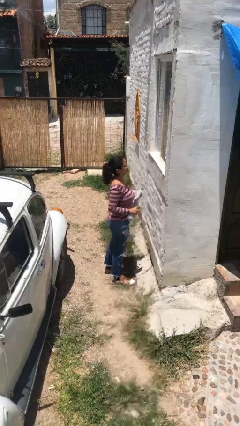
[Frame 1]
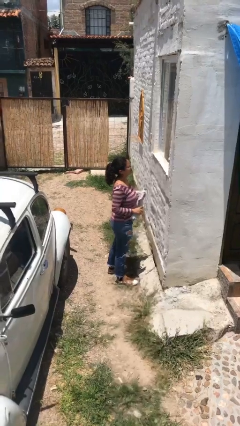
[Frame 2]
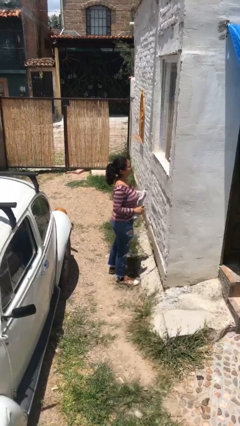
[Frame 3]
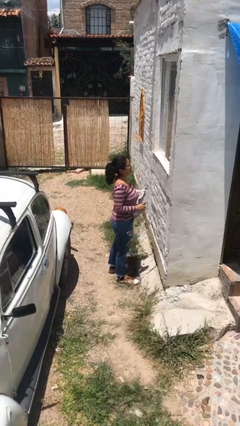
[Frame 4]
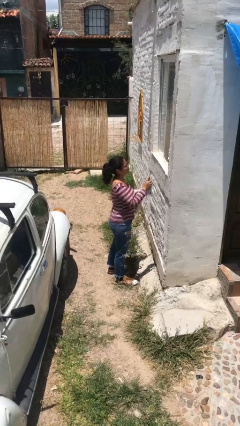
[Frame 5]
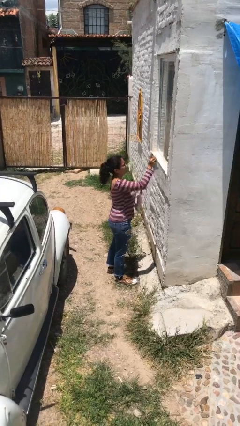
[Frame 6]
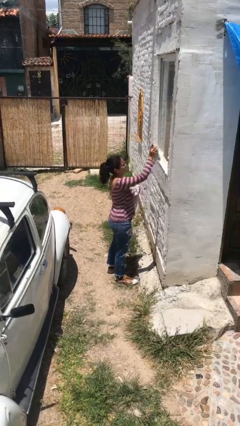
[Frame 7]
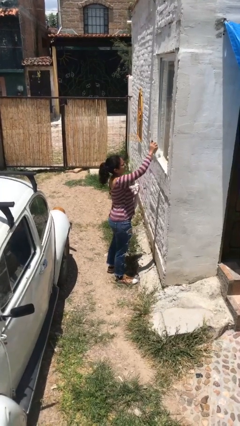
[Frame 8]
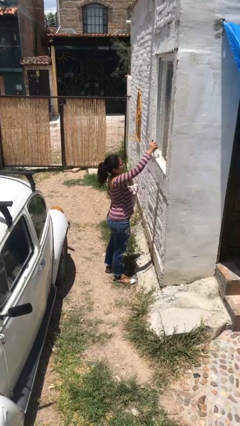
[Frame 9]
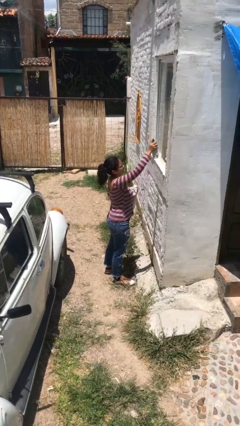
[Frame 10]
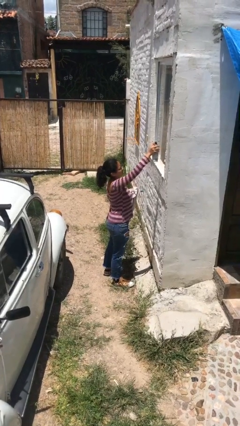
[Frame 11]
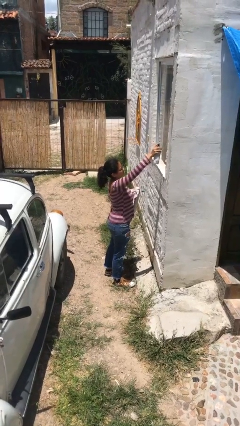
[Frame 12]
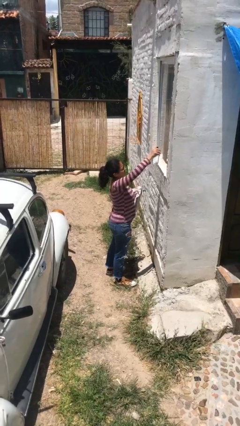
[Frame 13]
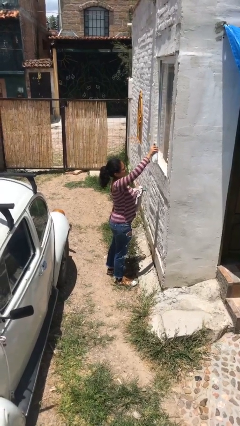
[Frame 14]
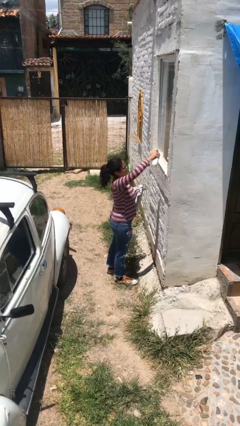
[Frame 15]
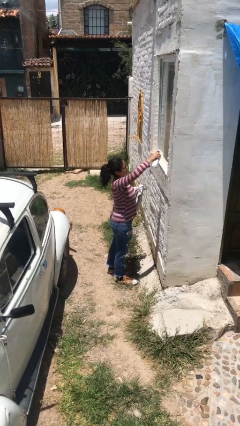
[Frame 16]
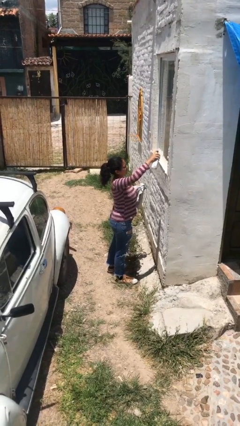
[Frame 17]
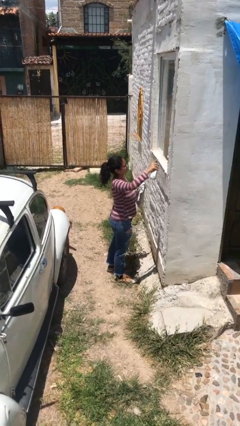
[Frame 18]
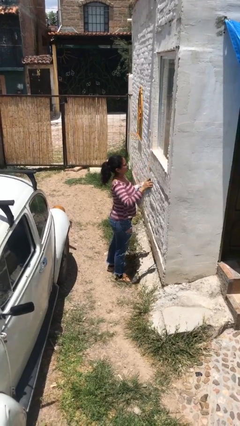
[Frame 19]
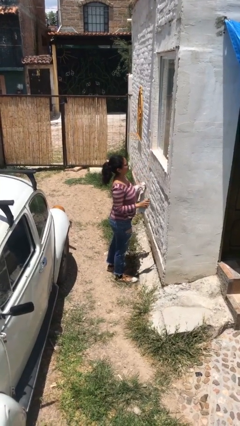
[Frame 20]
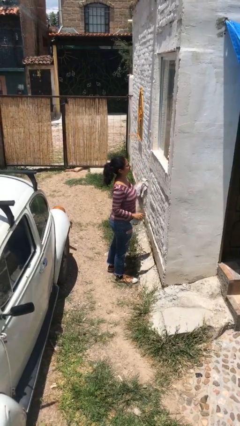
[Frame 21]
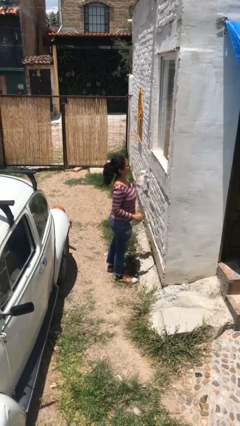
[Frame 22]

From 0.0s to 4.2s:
person sprays from bottle

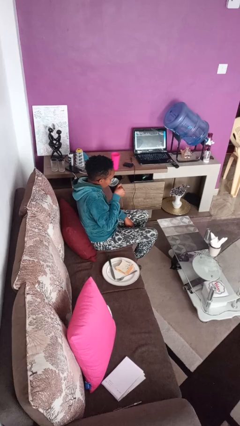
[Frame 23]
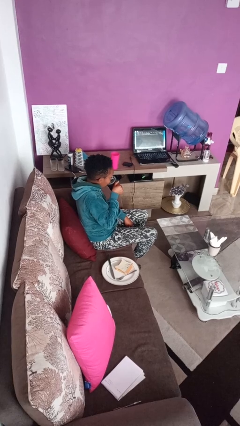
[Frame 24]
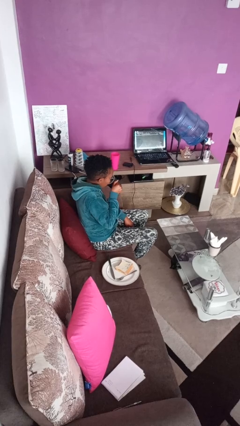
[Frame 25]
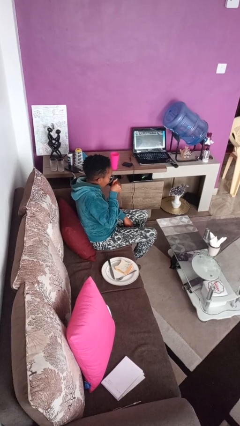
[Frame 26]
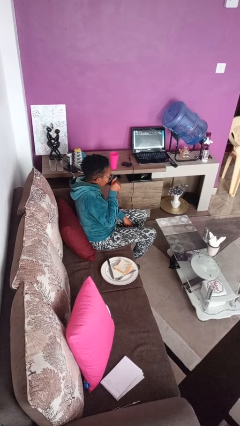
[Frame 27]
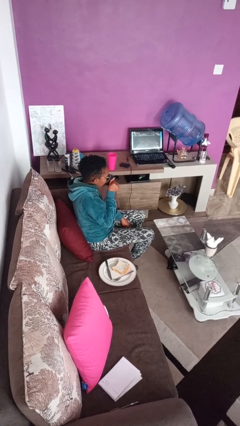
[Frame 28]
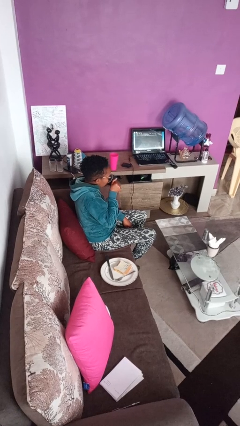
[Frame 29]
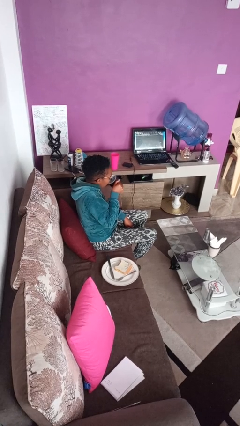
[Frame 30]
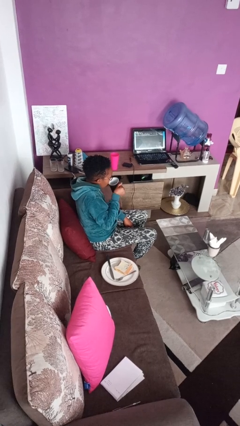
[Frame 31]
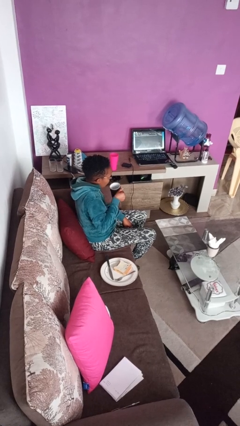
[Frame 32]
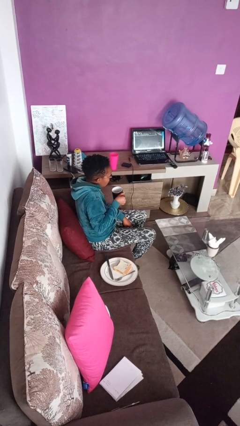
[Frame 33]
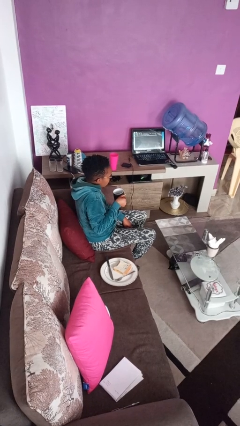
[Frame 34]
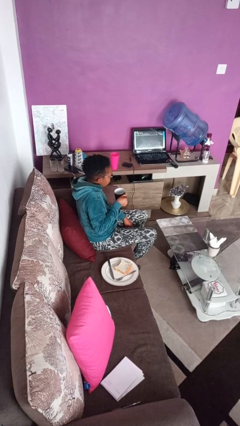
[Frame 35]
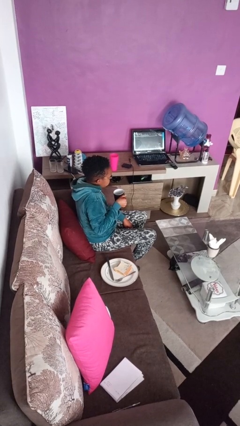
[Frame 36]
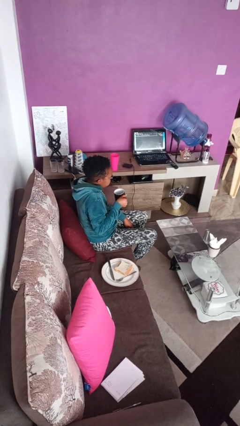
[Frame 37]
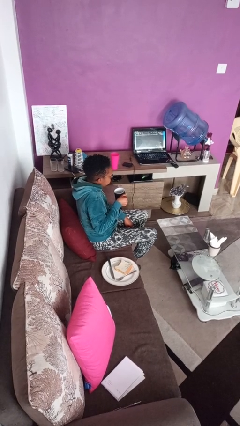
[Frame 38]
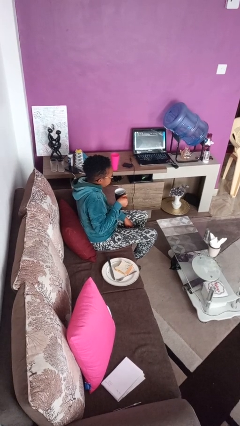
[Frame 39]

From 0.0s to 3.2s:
person drinks from mug

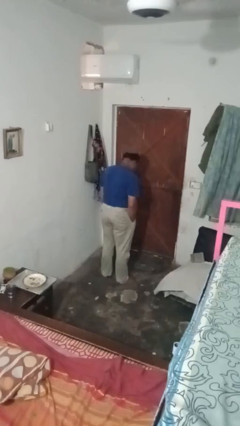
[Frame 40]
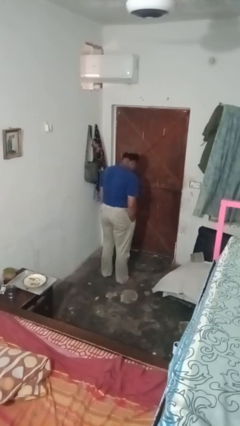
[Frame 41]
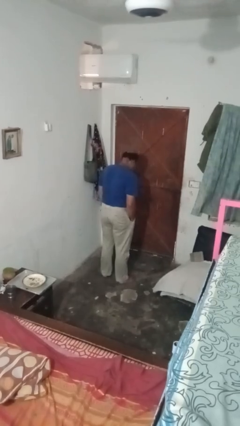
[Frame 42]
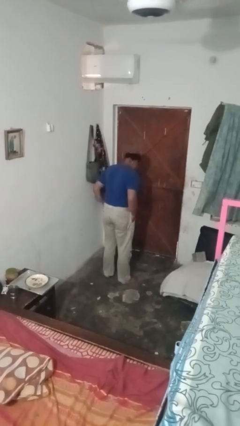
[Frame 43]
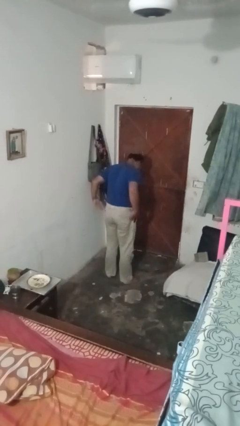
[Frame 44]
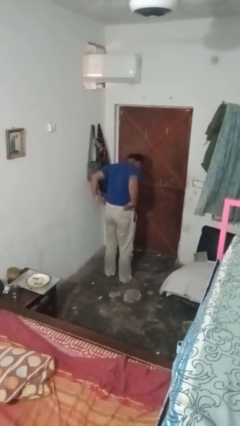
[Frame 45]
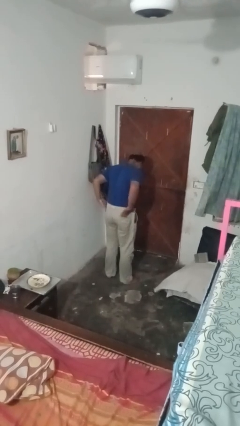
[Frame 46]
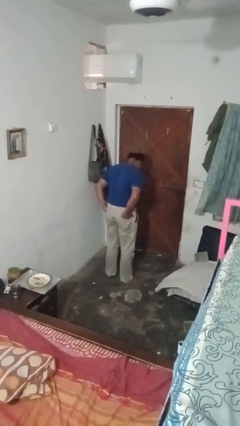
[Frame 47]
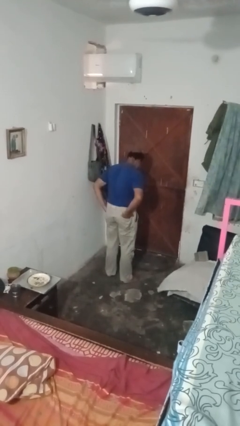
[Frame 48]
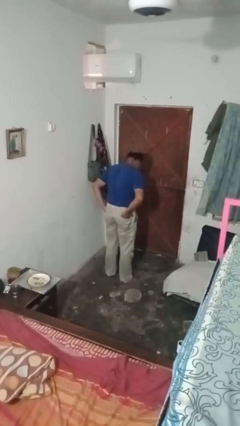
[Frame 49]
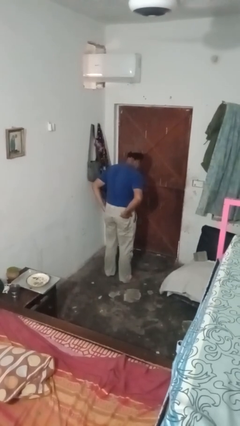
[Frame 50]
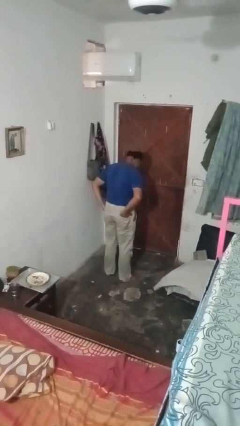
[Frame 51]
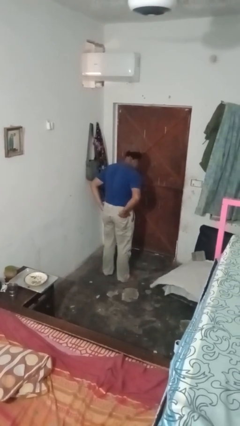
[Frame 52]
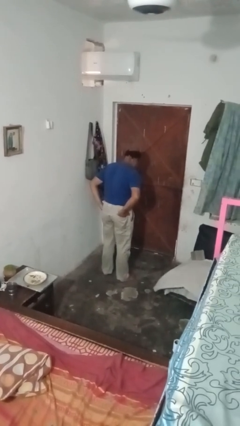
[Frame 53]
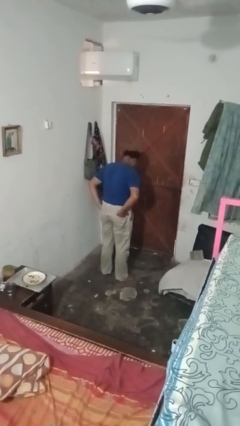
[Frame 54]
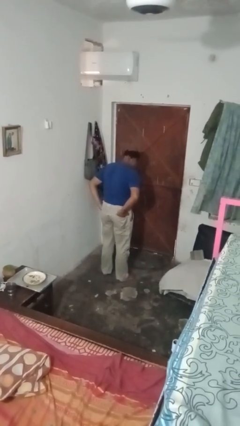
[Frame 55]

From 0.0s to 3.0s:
person puts hands in back pockets

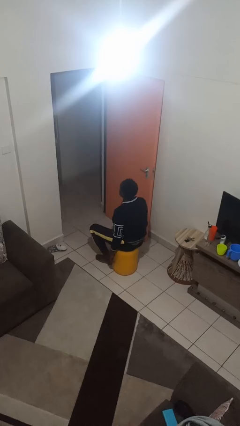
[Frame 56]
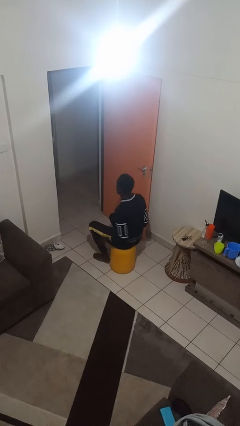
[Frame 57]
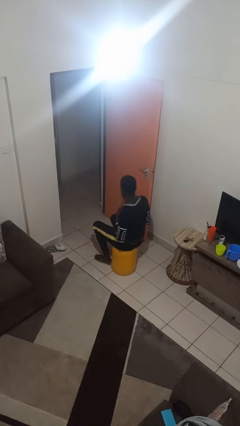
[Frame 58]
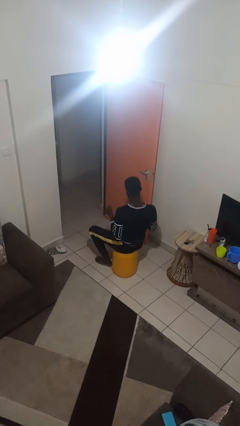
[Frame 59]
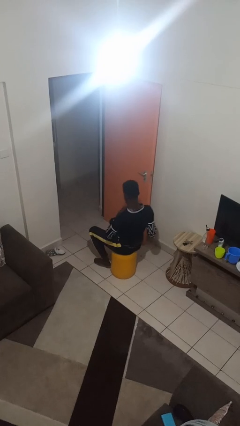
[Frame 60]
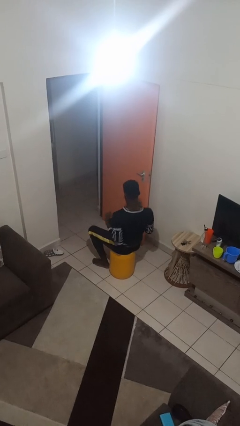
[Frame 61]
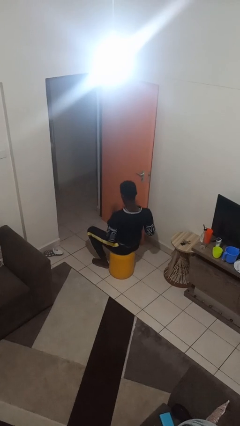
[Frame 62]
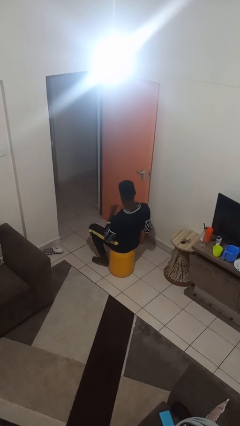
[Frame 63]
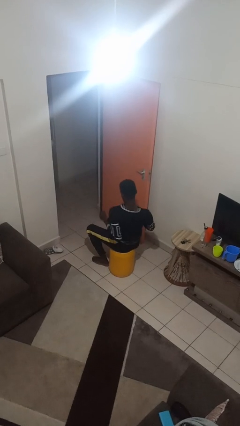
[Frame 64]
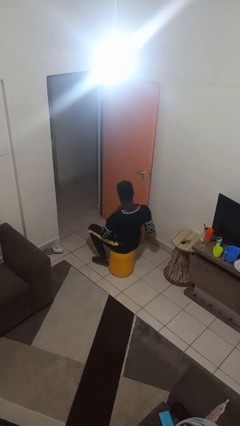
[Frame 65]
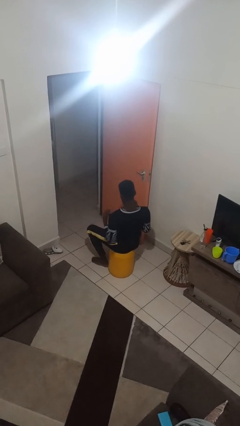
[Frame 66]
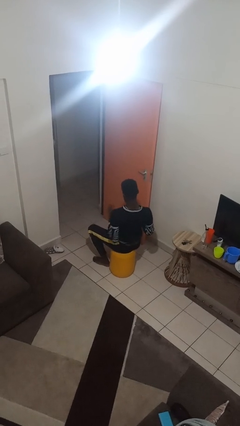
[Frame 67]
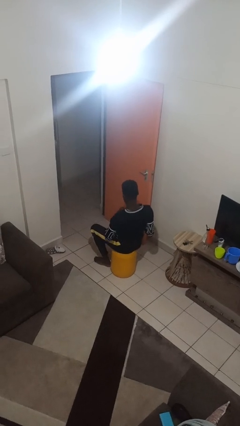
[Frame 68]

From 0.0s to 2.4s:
person drums on chest

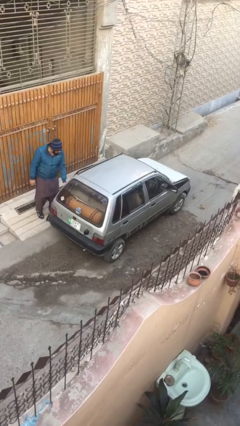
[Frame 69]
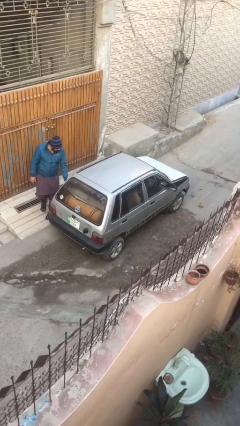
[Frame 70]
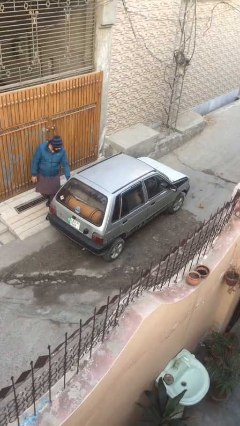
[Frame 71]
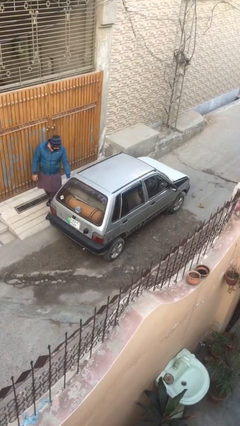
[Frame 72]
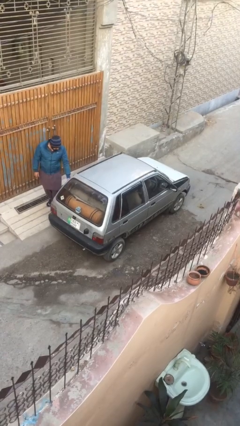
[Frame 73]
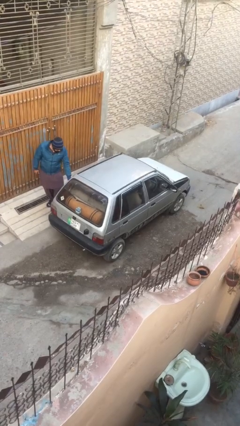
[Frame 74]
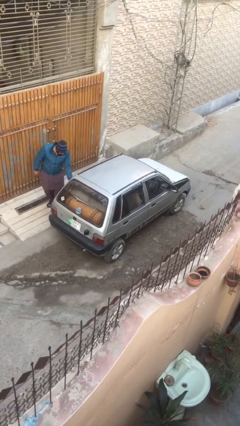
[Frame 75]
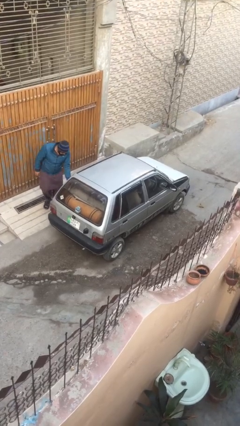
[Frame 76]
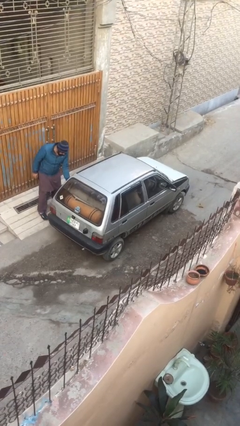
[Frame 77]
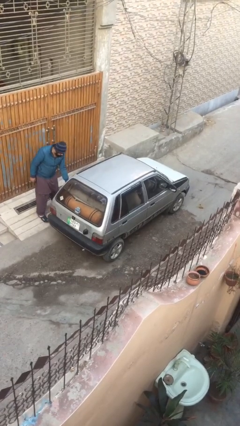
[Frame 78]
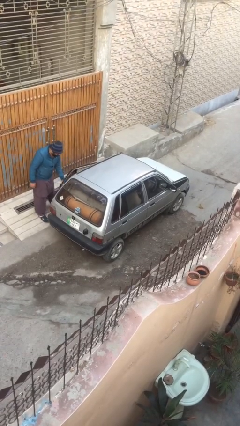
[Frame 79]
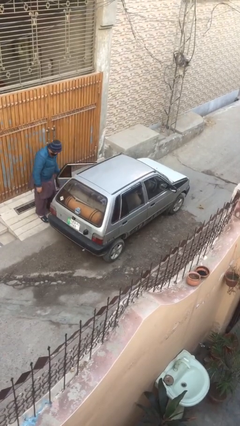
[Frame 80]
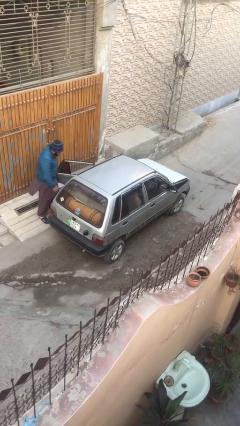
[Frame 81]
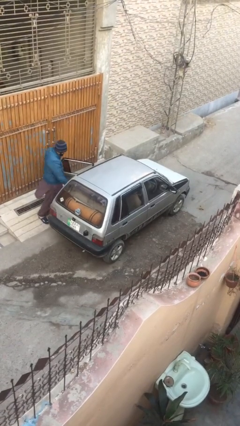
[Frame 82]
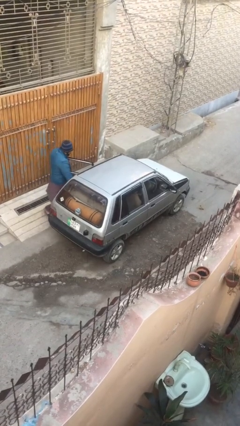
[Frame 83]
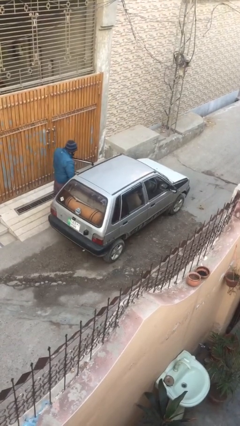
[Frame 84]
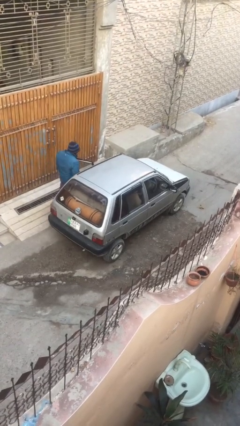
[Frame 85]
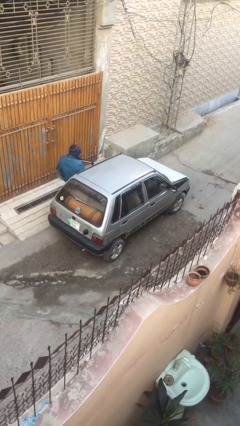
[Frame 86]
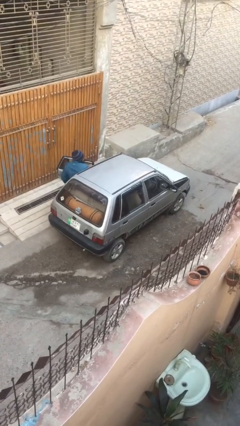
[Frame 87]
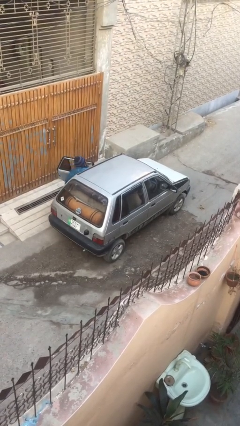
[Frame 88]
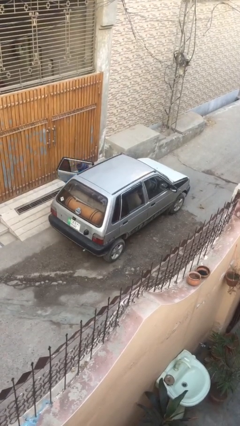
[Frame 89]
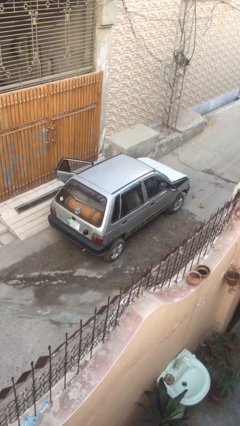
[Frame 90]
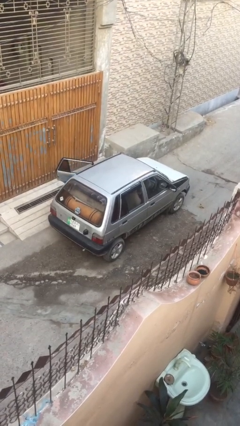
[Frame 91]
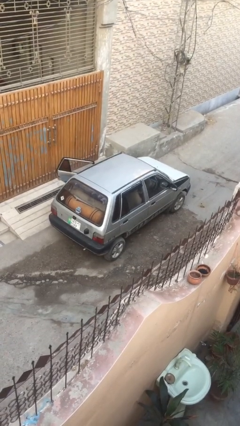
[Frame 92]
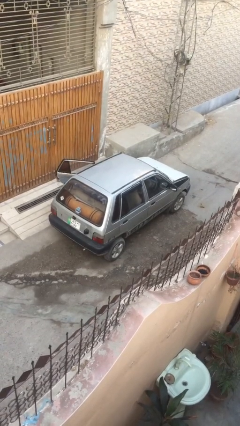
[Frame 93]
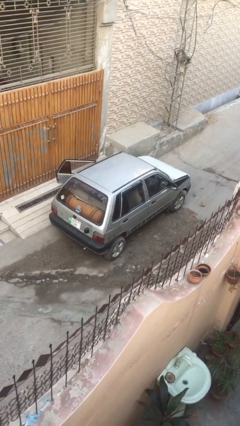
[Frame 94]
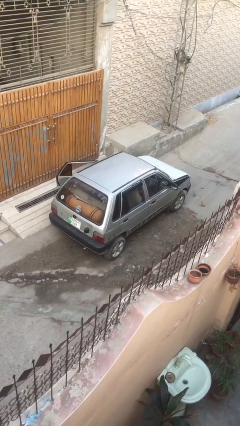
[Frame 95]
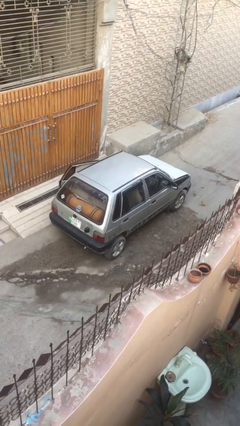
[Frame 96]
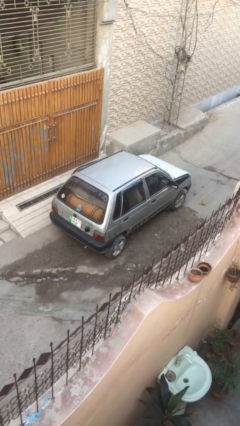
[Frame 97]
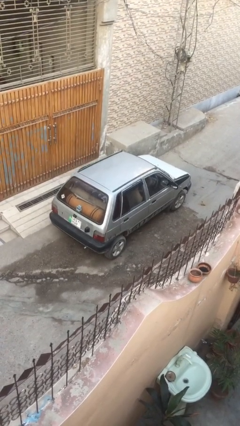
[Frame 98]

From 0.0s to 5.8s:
car picks up person
